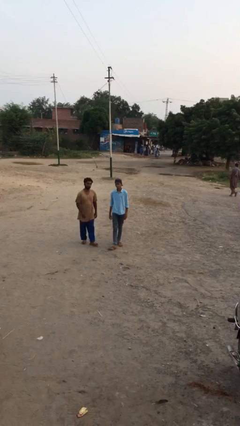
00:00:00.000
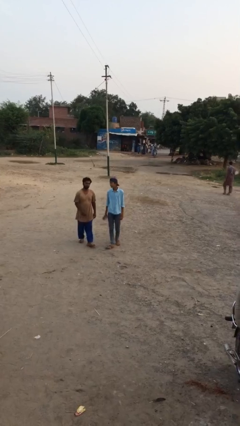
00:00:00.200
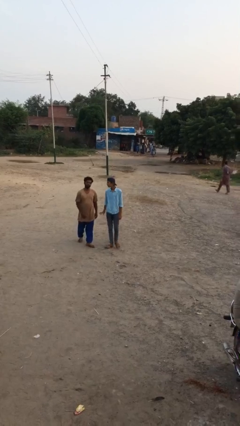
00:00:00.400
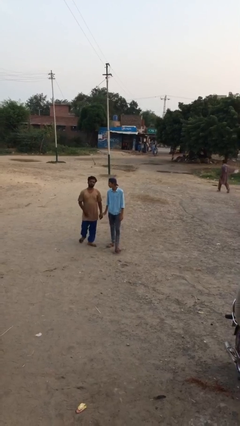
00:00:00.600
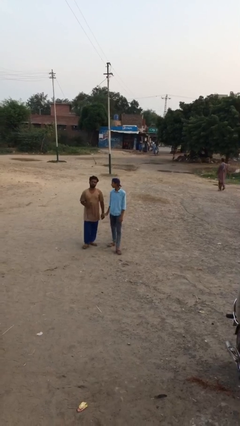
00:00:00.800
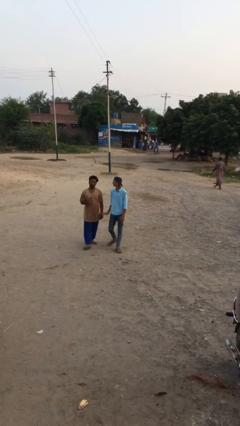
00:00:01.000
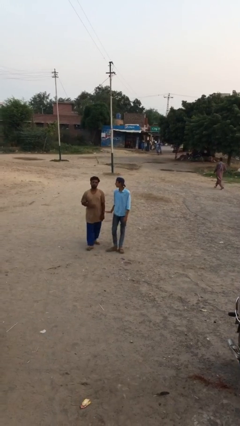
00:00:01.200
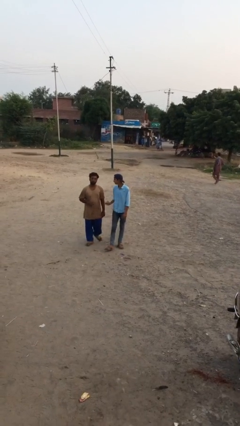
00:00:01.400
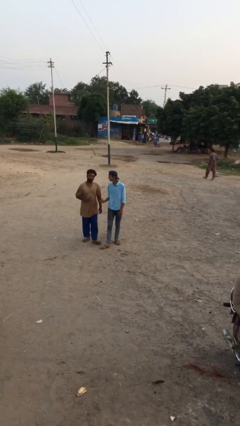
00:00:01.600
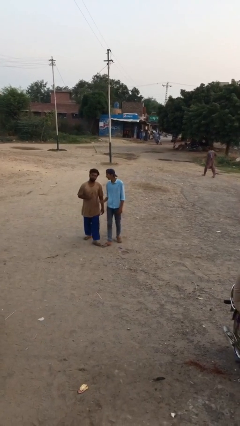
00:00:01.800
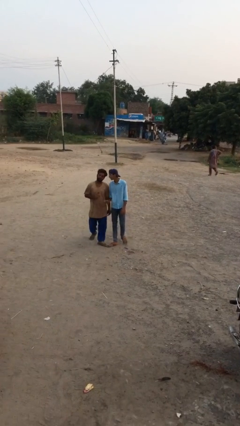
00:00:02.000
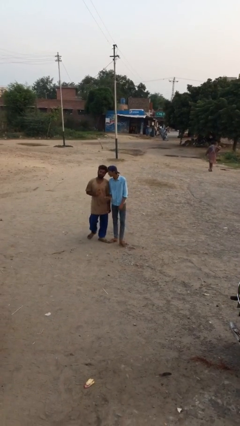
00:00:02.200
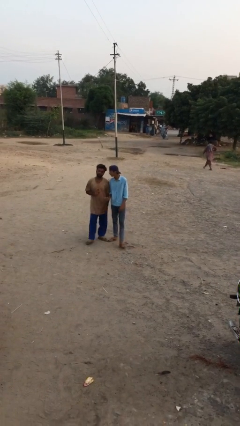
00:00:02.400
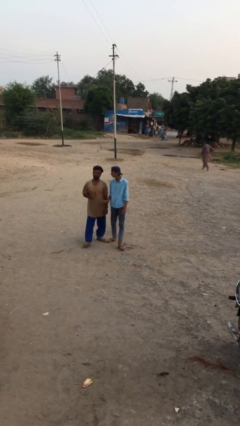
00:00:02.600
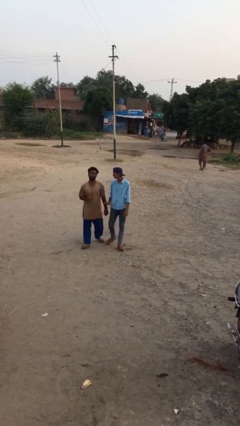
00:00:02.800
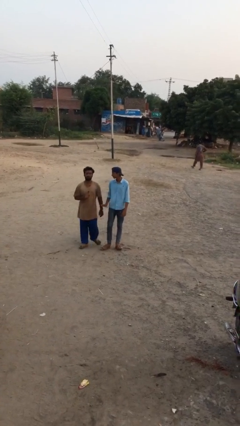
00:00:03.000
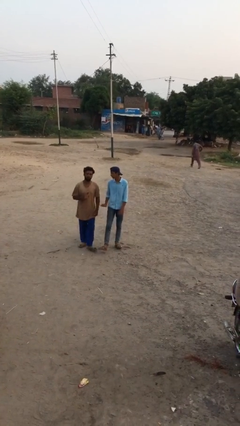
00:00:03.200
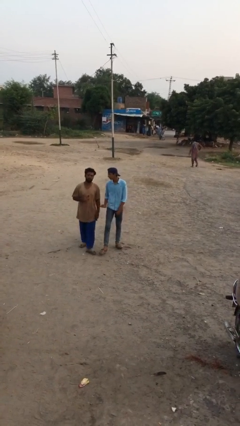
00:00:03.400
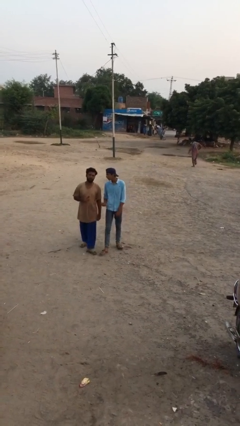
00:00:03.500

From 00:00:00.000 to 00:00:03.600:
person talks to person

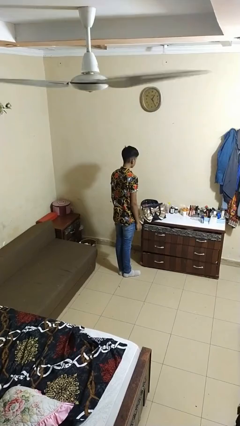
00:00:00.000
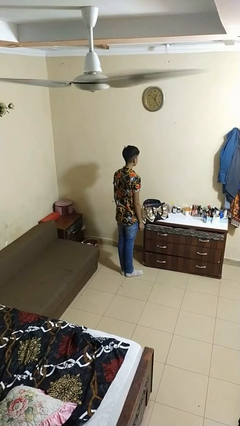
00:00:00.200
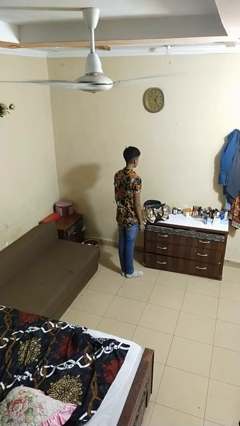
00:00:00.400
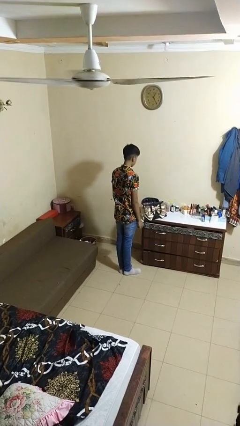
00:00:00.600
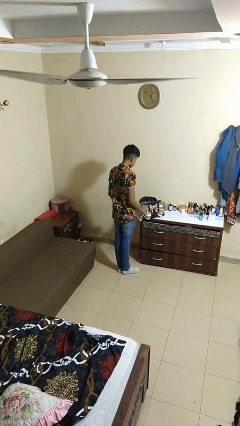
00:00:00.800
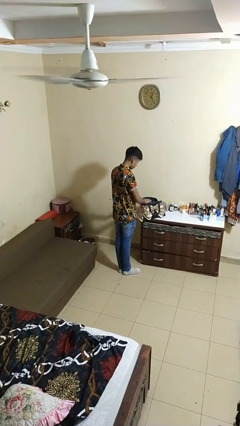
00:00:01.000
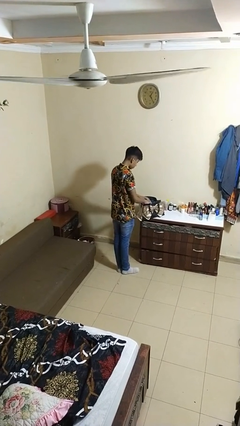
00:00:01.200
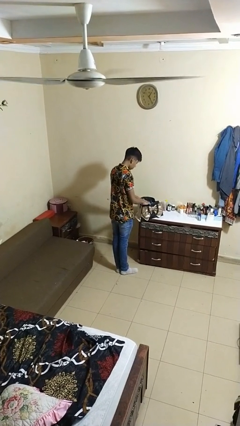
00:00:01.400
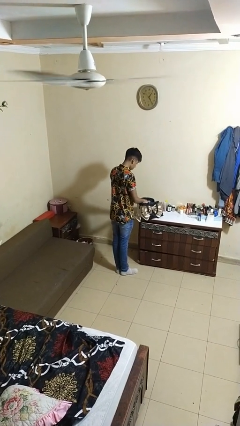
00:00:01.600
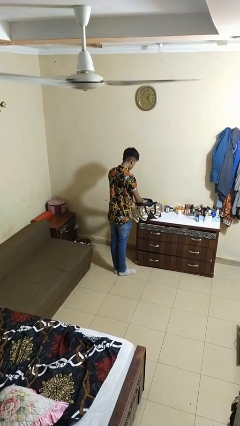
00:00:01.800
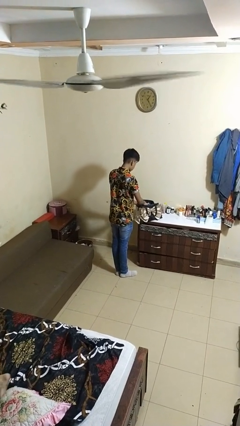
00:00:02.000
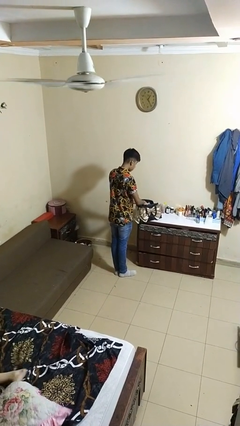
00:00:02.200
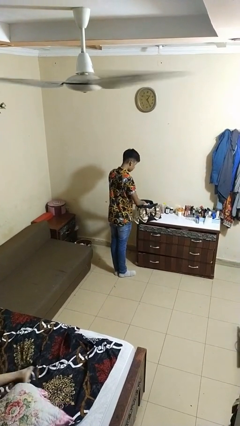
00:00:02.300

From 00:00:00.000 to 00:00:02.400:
person searches in purse

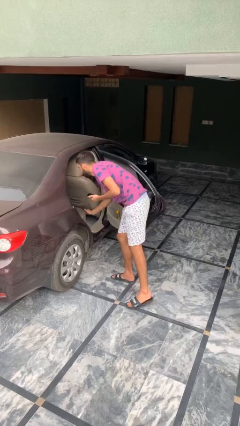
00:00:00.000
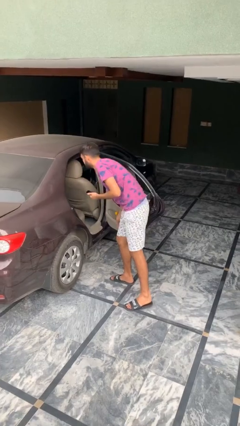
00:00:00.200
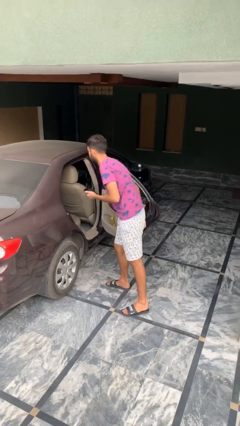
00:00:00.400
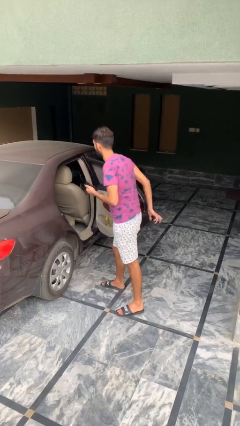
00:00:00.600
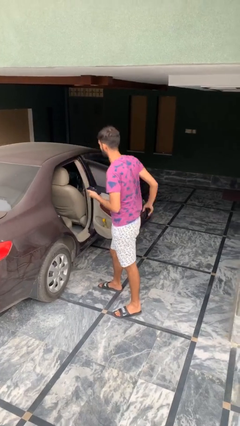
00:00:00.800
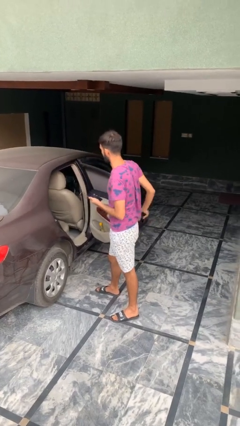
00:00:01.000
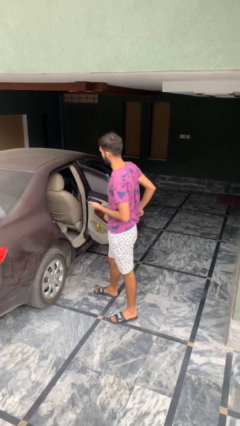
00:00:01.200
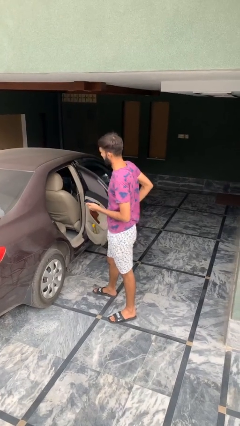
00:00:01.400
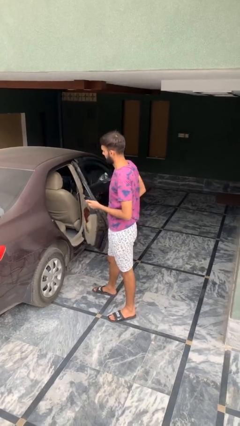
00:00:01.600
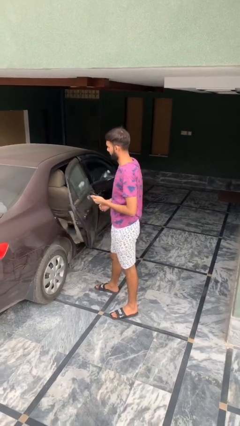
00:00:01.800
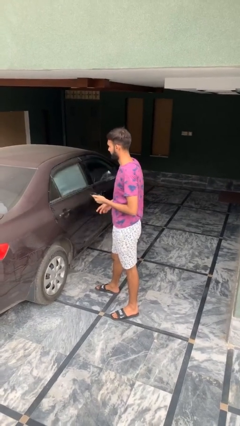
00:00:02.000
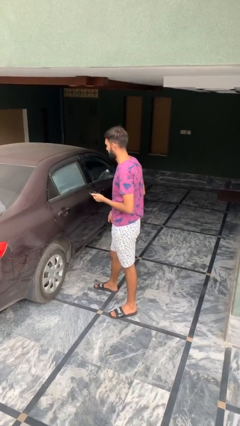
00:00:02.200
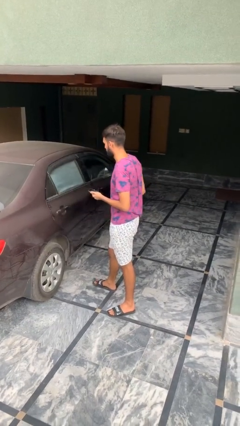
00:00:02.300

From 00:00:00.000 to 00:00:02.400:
person closes car door

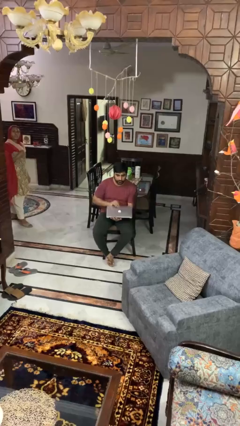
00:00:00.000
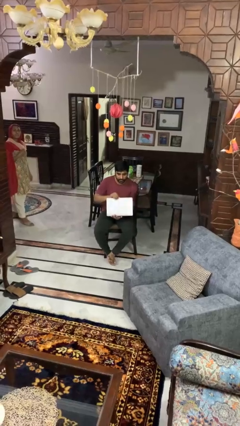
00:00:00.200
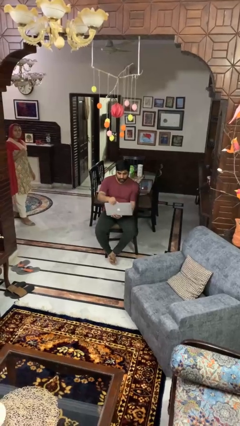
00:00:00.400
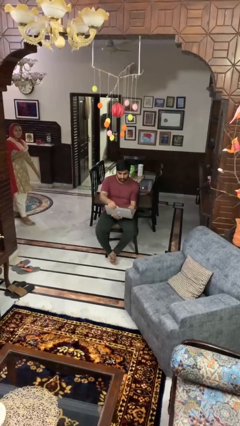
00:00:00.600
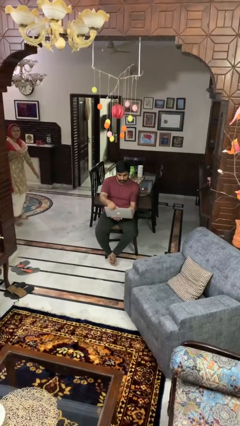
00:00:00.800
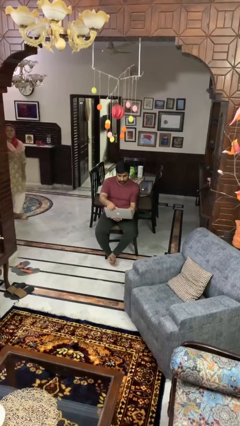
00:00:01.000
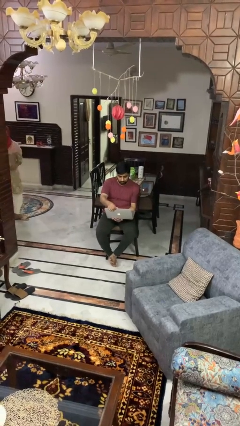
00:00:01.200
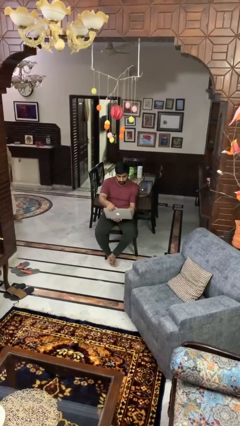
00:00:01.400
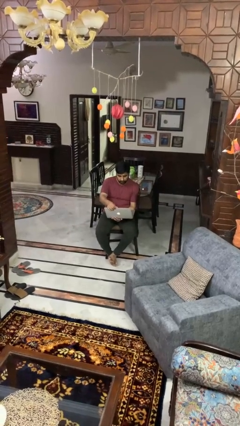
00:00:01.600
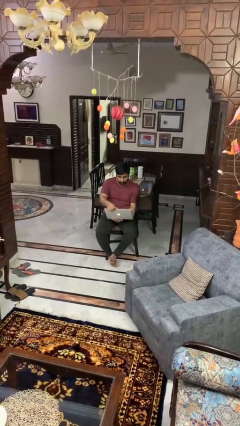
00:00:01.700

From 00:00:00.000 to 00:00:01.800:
person opens laptop

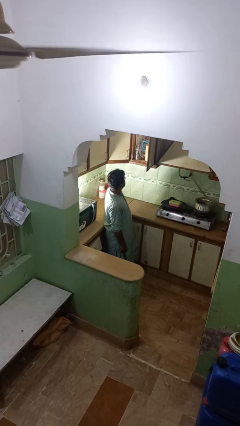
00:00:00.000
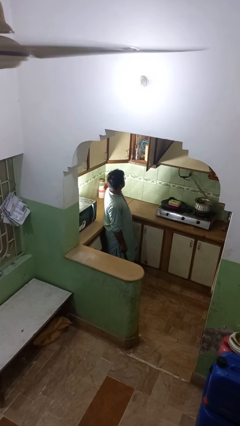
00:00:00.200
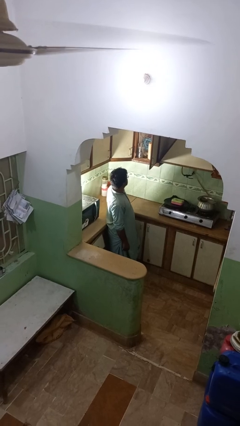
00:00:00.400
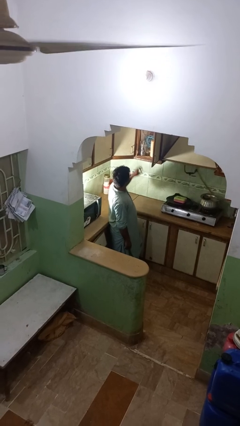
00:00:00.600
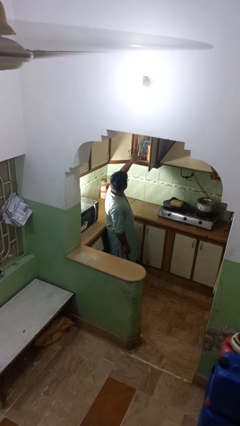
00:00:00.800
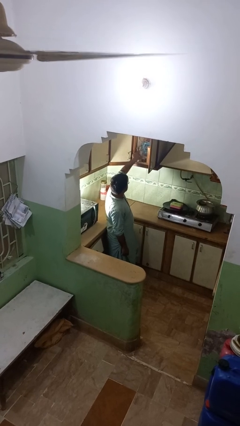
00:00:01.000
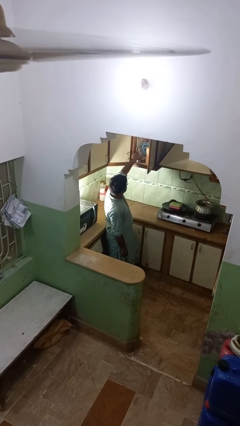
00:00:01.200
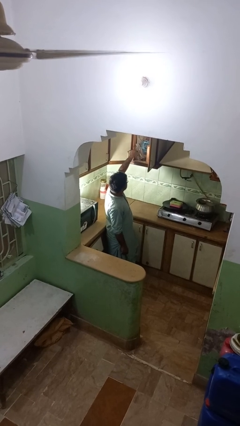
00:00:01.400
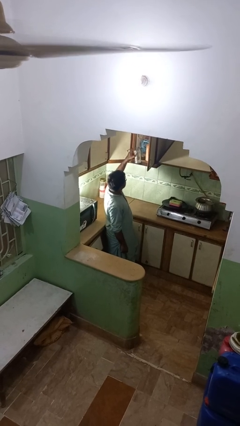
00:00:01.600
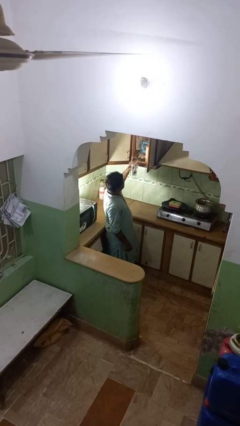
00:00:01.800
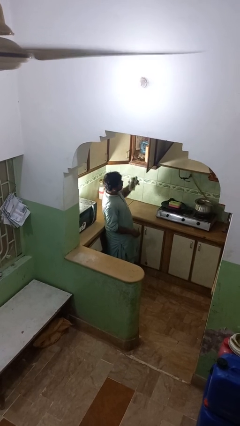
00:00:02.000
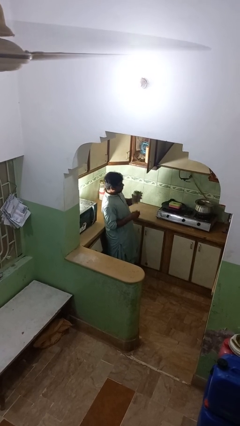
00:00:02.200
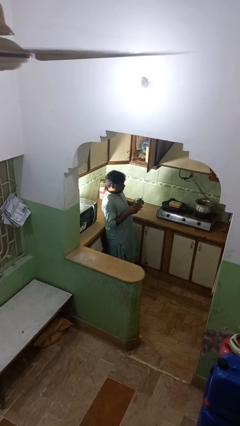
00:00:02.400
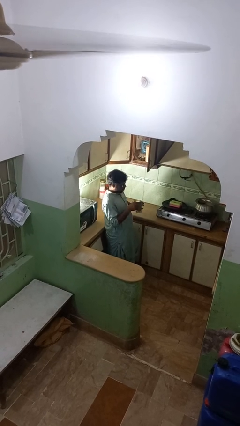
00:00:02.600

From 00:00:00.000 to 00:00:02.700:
person takes object from kitchen drawer

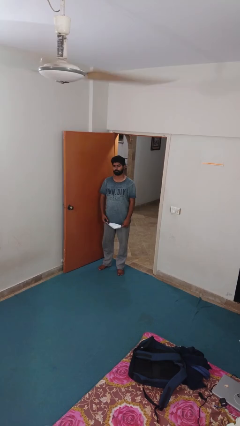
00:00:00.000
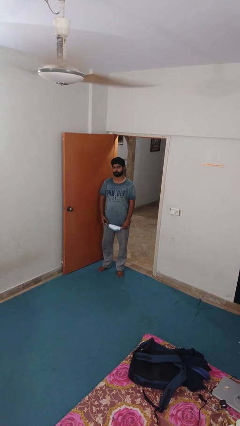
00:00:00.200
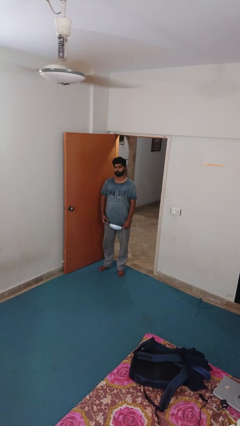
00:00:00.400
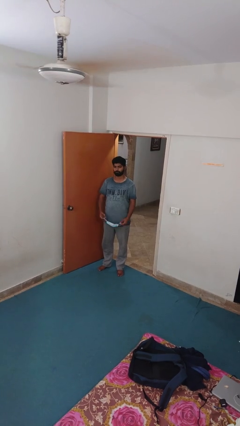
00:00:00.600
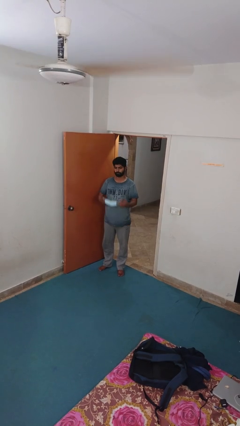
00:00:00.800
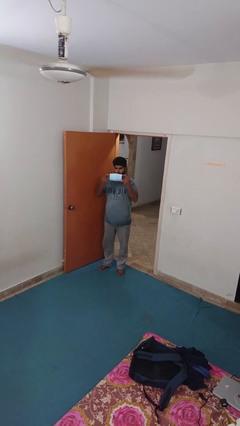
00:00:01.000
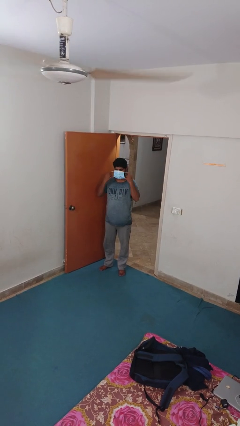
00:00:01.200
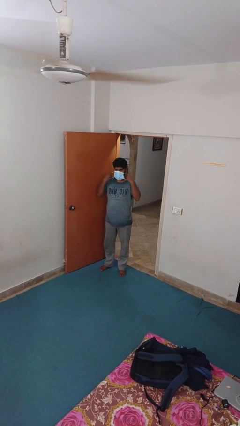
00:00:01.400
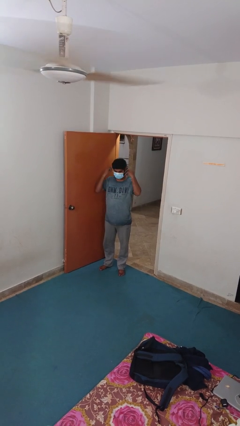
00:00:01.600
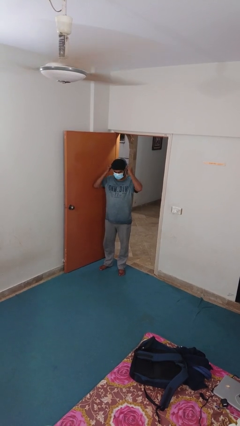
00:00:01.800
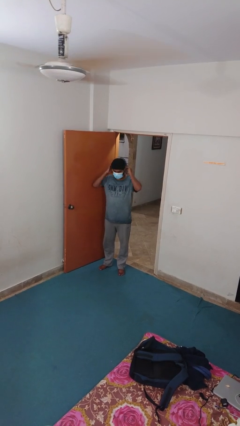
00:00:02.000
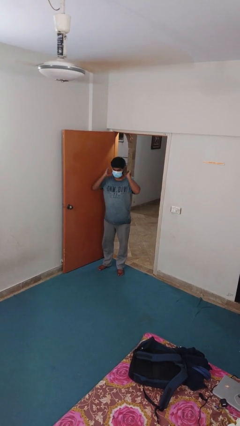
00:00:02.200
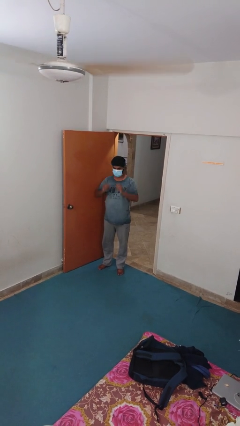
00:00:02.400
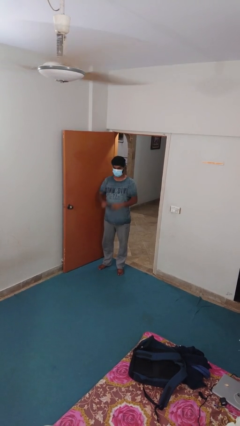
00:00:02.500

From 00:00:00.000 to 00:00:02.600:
person puts on facemask

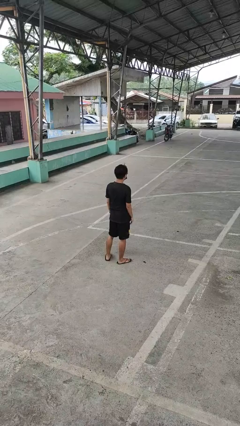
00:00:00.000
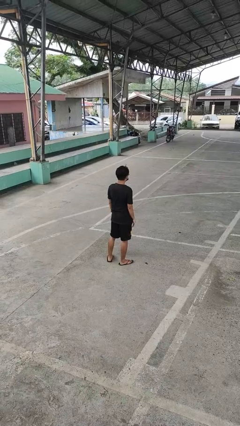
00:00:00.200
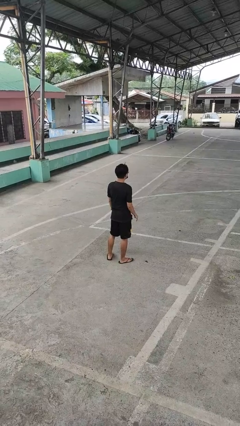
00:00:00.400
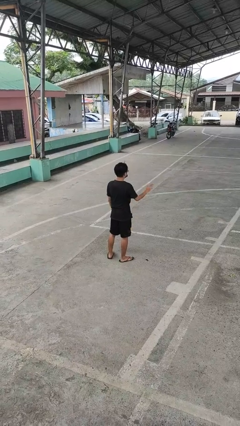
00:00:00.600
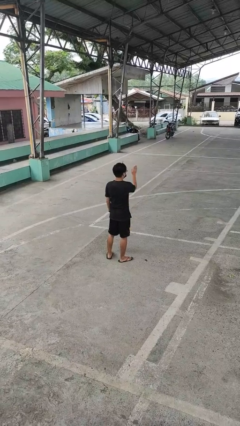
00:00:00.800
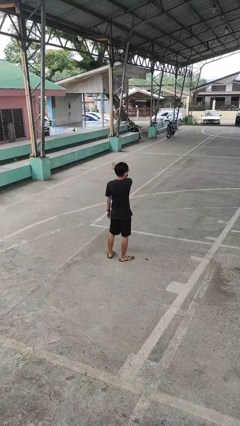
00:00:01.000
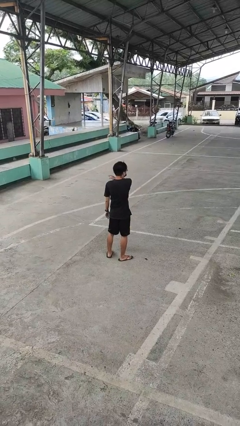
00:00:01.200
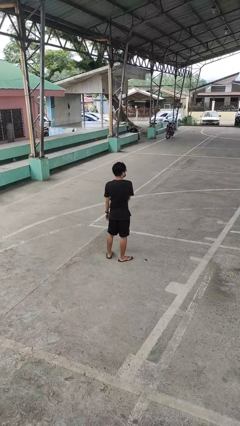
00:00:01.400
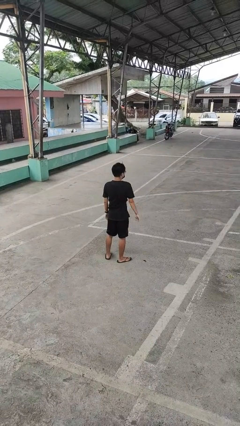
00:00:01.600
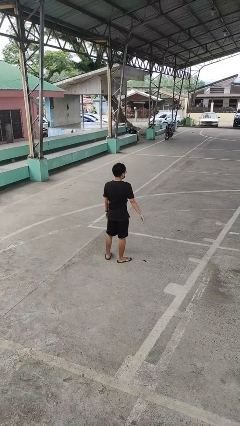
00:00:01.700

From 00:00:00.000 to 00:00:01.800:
person gestures swipe left
